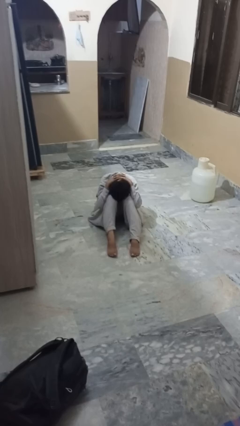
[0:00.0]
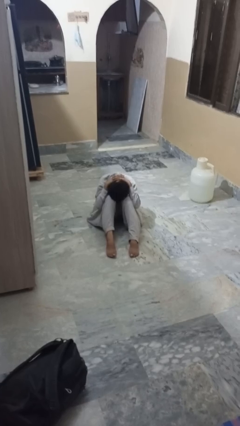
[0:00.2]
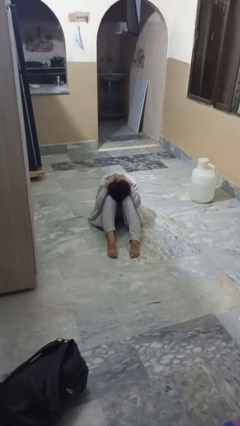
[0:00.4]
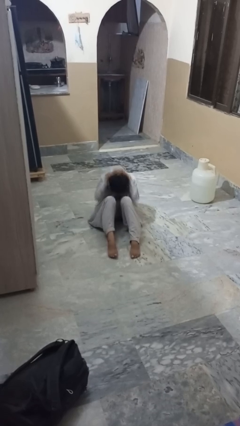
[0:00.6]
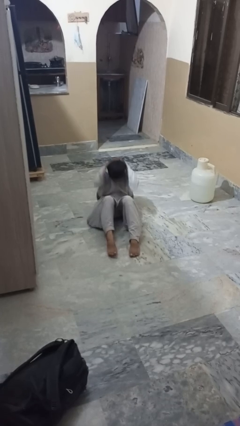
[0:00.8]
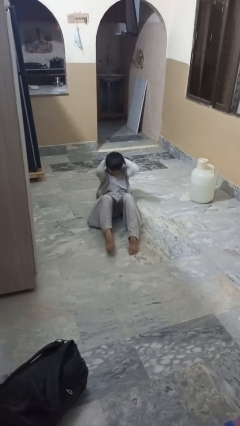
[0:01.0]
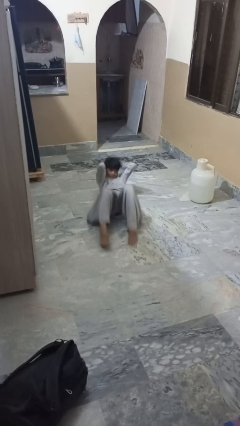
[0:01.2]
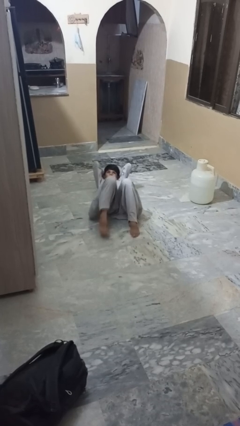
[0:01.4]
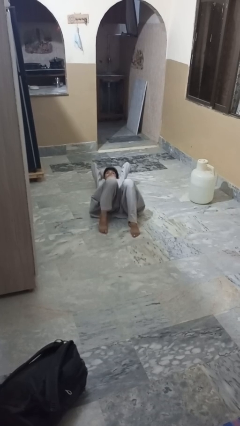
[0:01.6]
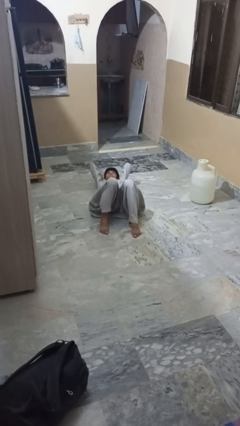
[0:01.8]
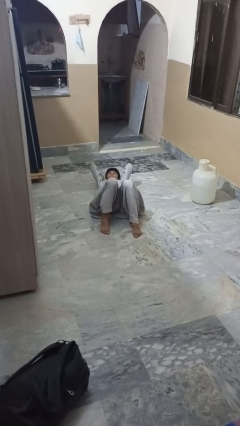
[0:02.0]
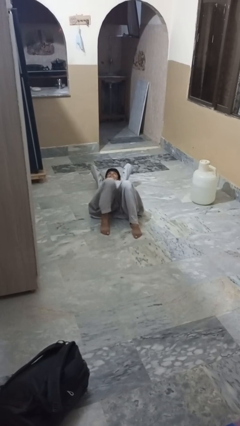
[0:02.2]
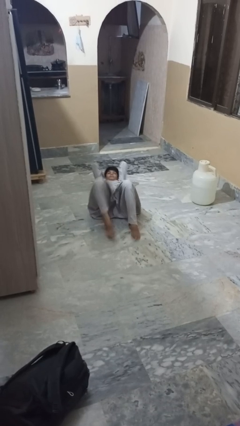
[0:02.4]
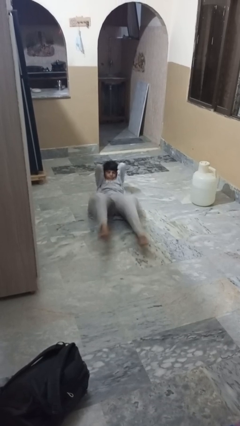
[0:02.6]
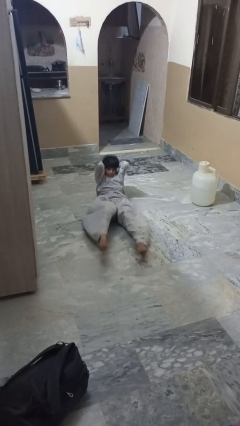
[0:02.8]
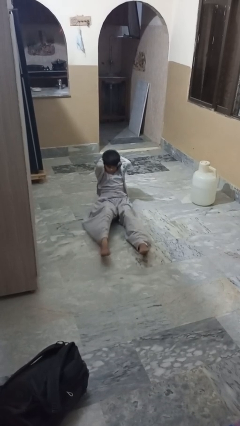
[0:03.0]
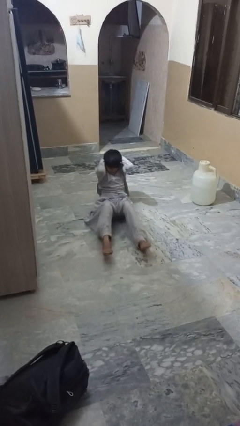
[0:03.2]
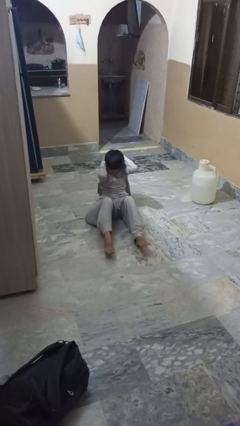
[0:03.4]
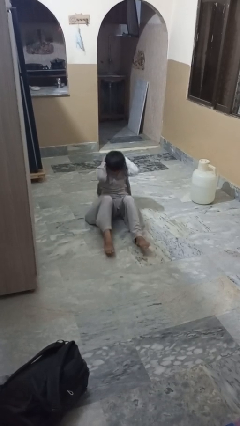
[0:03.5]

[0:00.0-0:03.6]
person exercises with situp

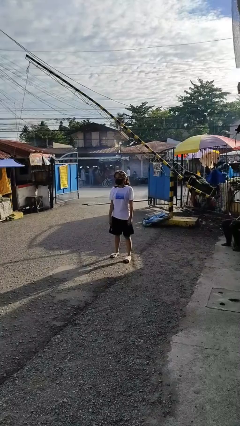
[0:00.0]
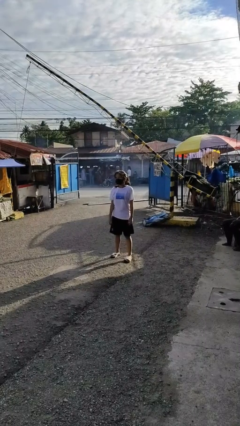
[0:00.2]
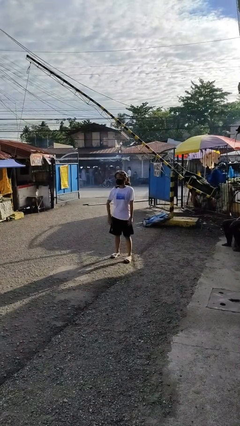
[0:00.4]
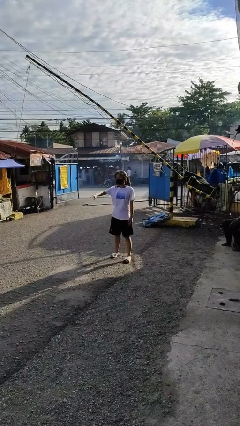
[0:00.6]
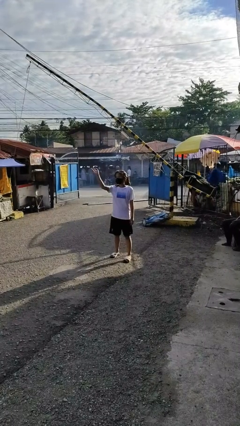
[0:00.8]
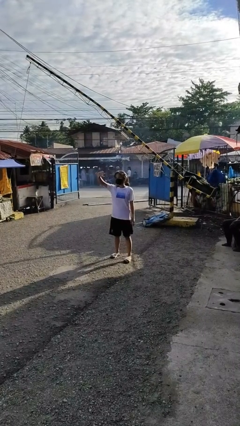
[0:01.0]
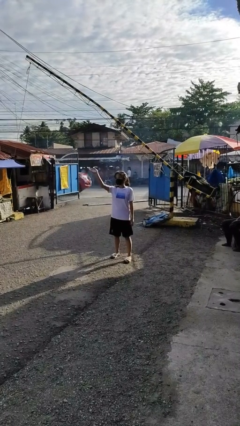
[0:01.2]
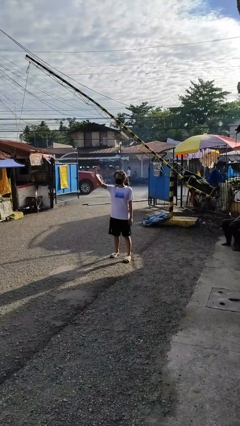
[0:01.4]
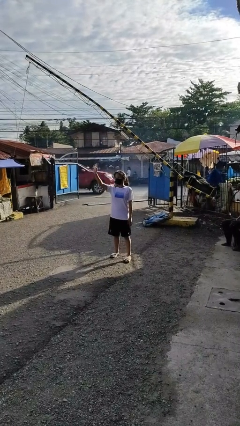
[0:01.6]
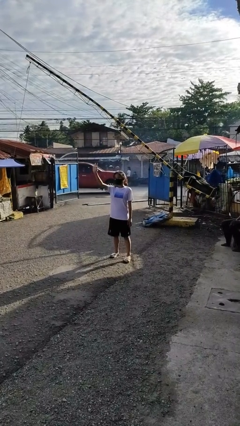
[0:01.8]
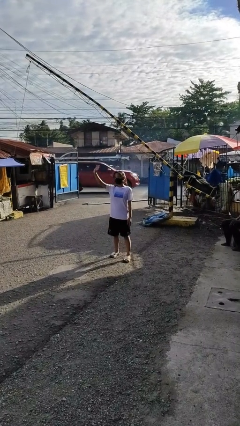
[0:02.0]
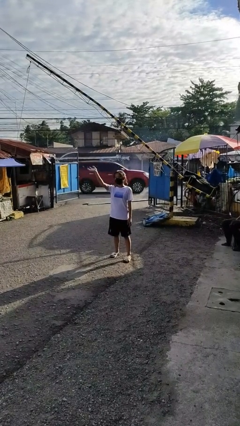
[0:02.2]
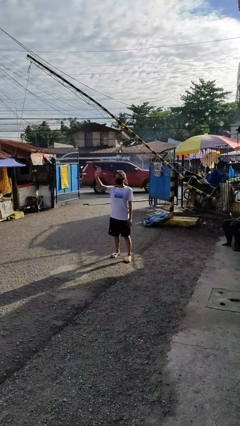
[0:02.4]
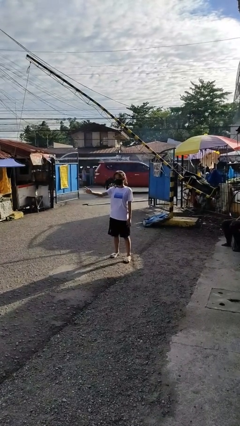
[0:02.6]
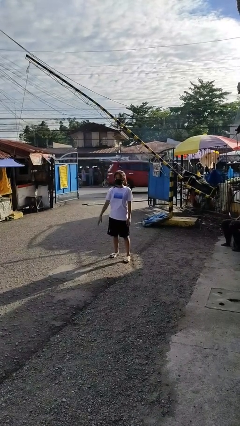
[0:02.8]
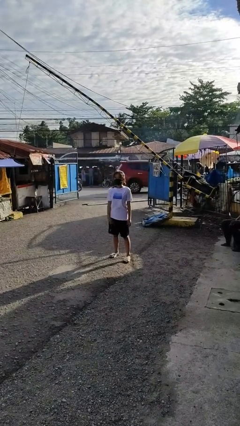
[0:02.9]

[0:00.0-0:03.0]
person waves at person

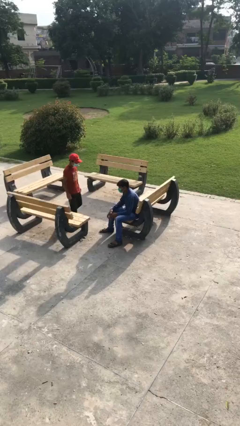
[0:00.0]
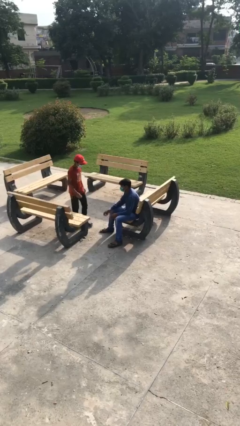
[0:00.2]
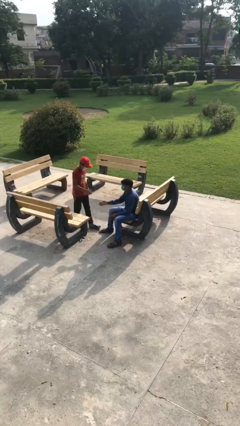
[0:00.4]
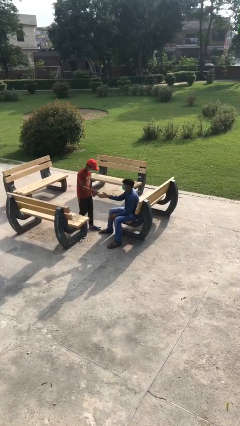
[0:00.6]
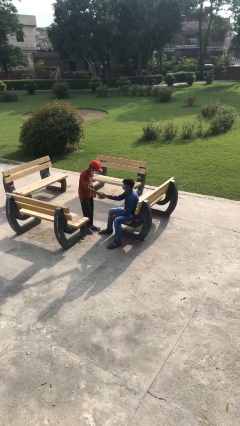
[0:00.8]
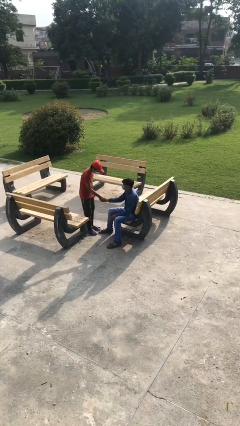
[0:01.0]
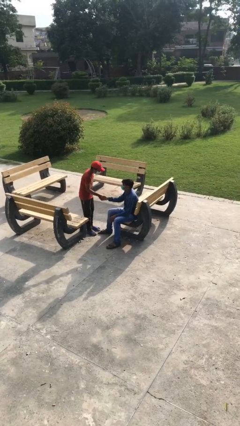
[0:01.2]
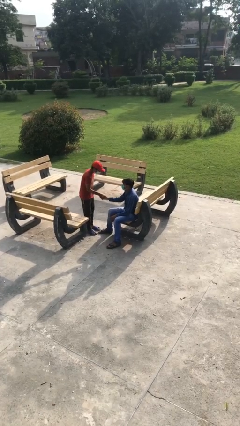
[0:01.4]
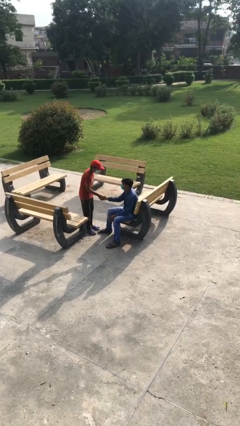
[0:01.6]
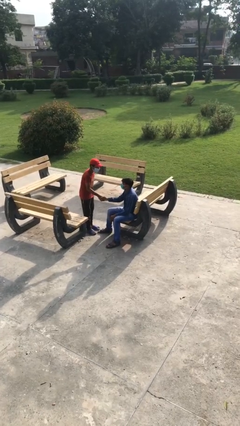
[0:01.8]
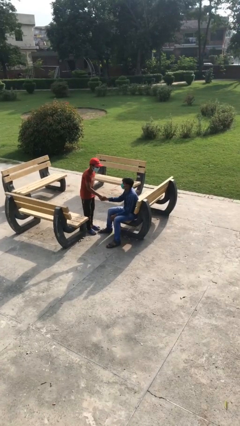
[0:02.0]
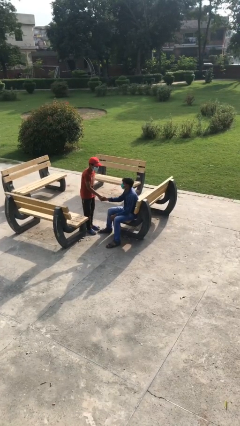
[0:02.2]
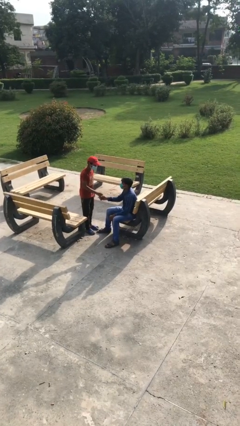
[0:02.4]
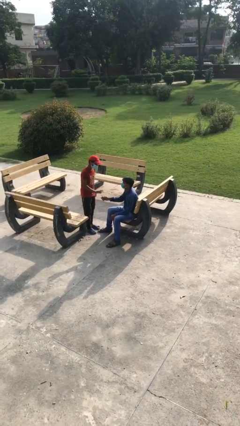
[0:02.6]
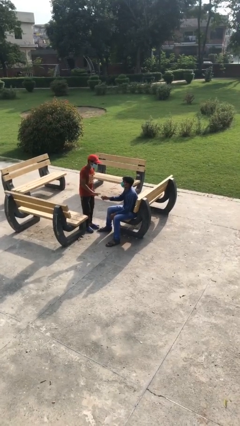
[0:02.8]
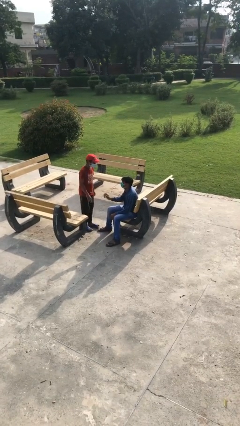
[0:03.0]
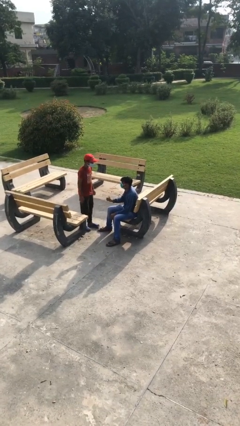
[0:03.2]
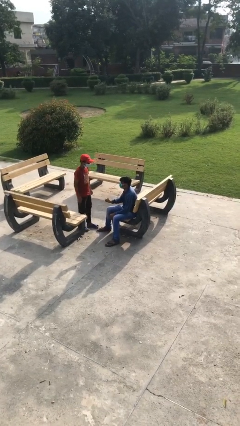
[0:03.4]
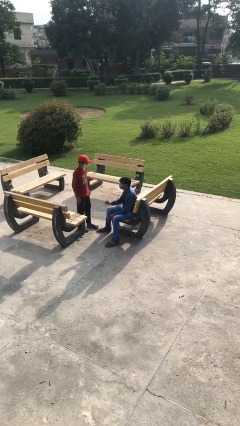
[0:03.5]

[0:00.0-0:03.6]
person shakes hand

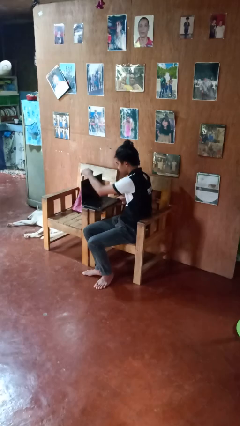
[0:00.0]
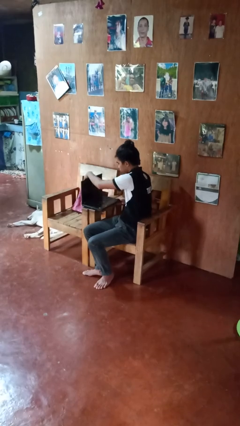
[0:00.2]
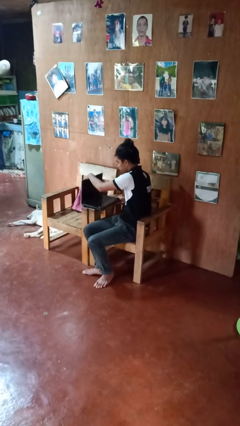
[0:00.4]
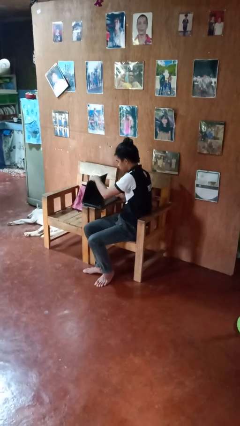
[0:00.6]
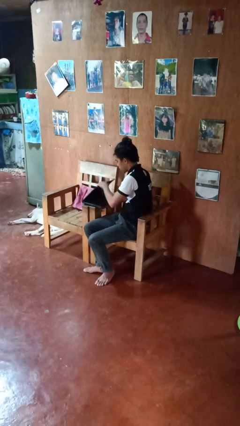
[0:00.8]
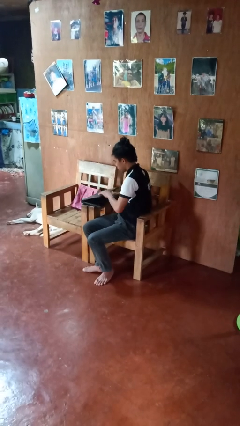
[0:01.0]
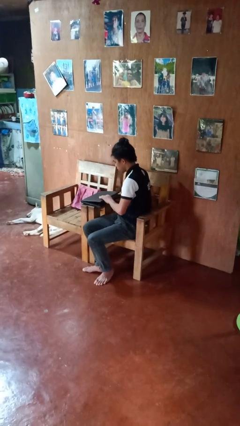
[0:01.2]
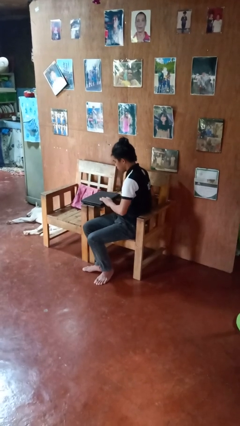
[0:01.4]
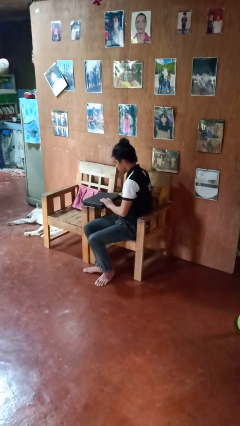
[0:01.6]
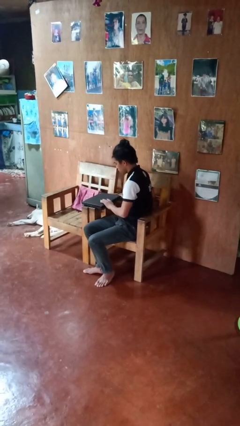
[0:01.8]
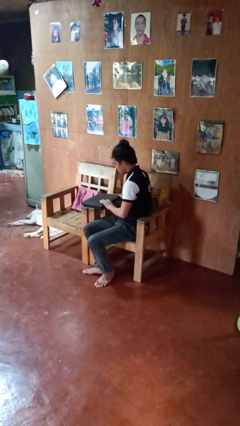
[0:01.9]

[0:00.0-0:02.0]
person closes laptop

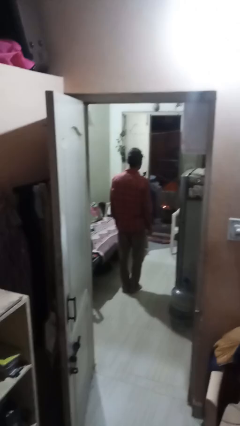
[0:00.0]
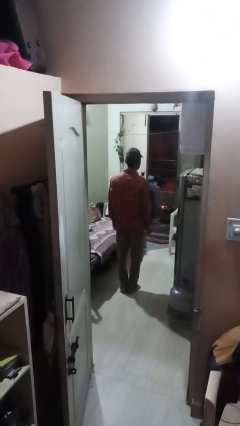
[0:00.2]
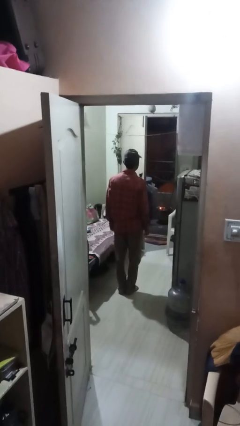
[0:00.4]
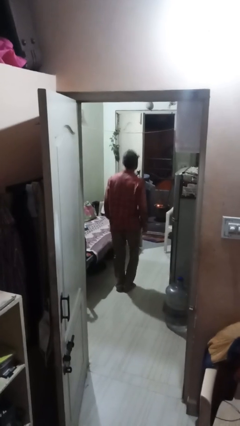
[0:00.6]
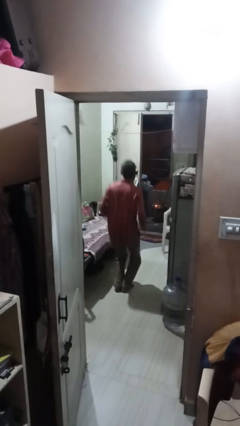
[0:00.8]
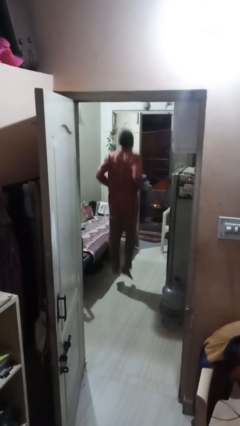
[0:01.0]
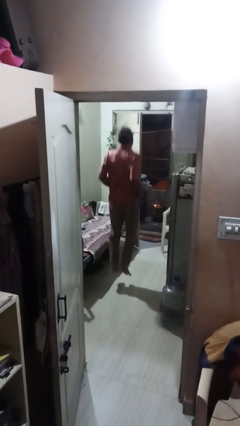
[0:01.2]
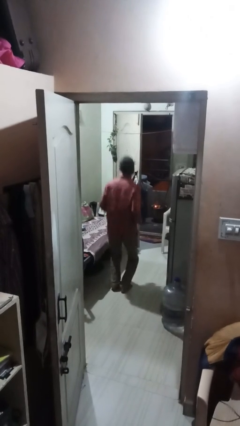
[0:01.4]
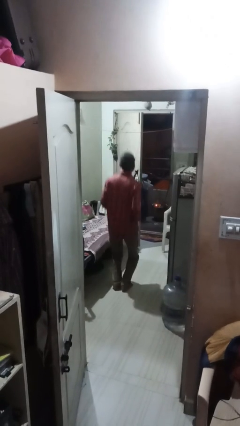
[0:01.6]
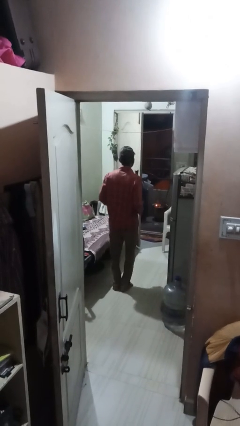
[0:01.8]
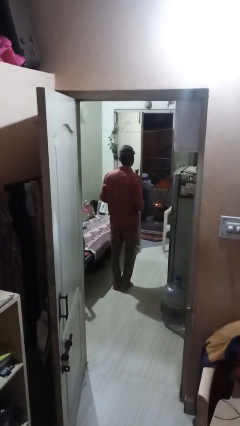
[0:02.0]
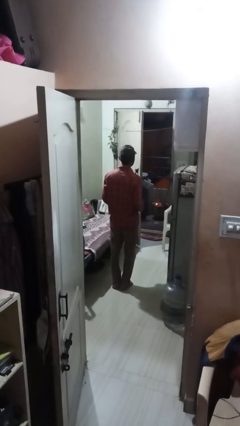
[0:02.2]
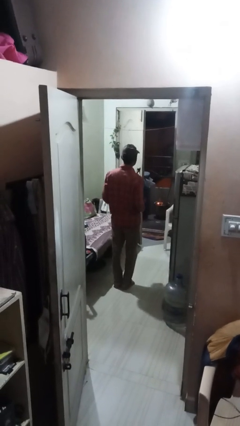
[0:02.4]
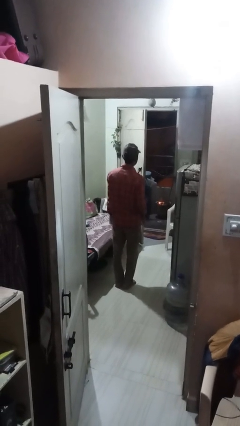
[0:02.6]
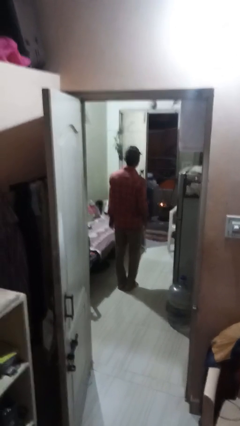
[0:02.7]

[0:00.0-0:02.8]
person jumps

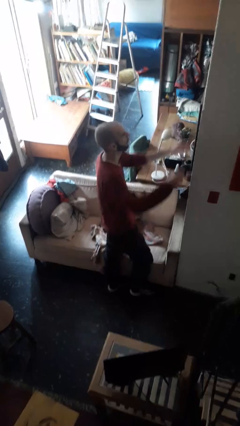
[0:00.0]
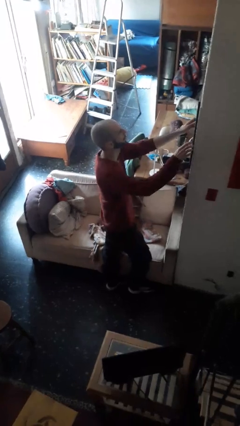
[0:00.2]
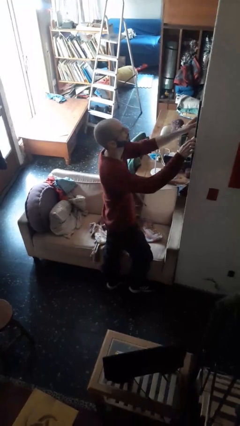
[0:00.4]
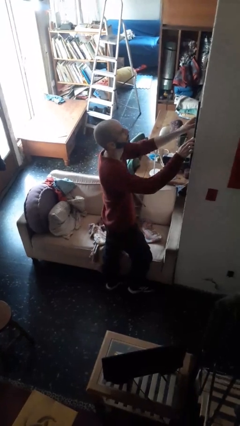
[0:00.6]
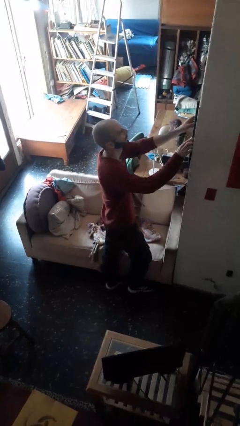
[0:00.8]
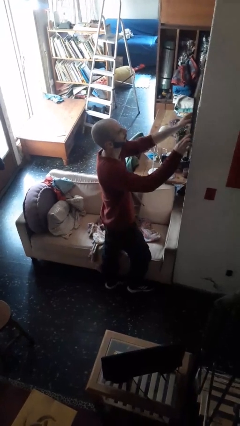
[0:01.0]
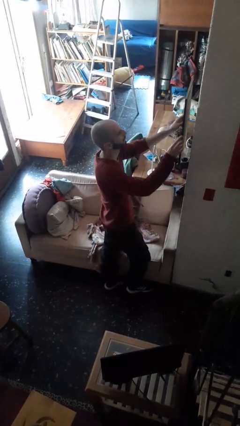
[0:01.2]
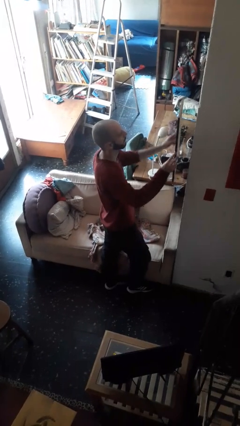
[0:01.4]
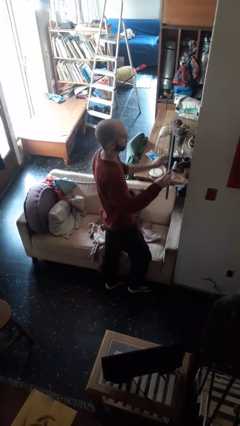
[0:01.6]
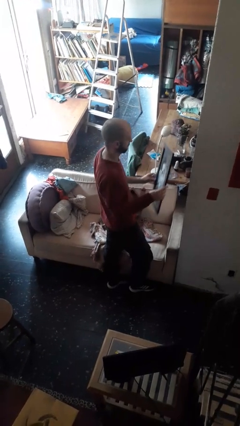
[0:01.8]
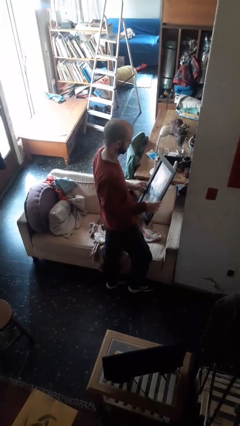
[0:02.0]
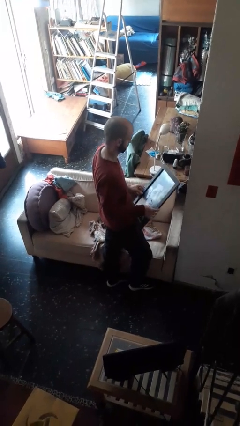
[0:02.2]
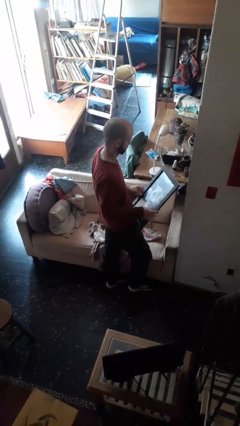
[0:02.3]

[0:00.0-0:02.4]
person takes down picture frame
